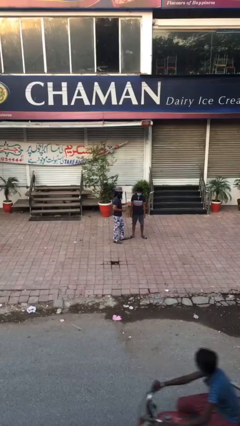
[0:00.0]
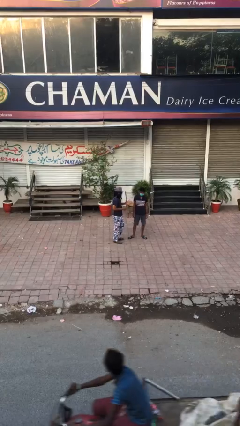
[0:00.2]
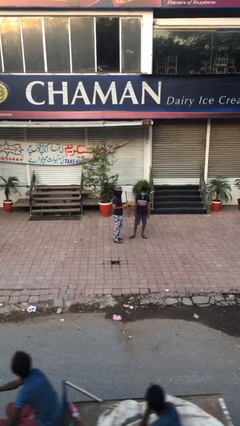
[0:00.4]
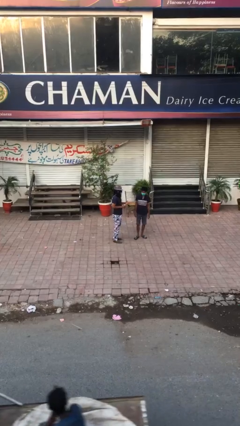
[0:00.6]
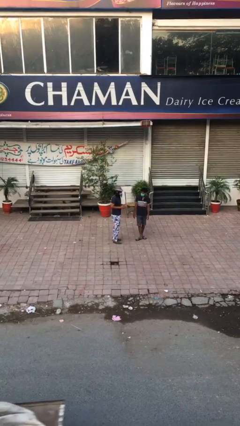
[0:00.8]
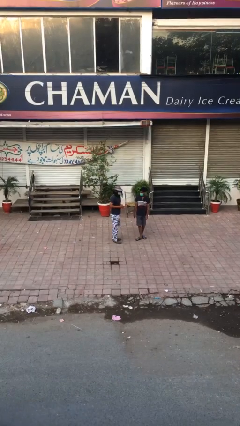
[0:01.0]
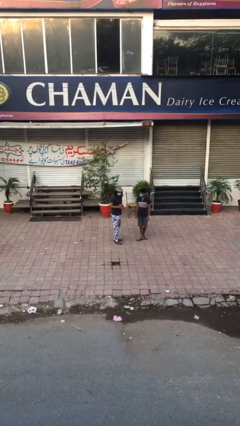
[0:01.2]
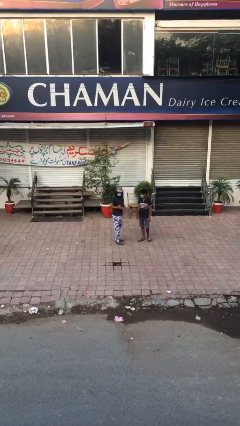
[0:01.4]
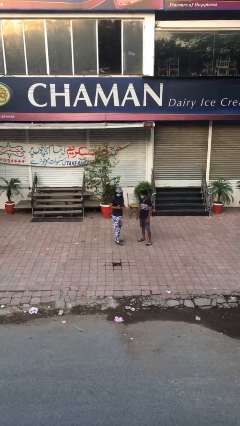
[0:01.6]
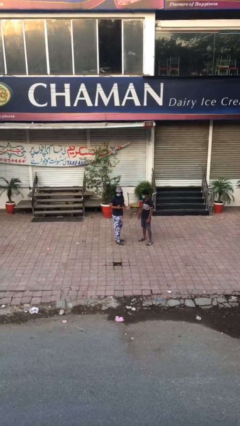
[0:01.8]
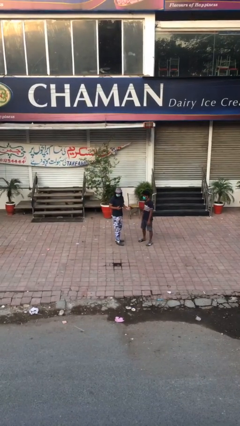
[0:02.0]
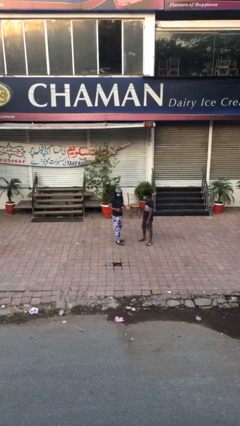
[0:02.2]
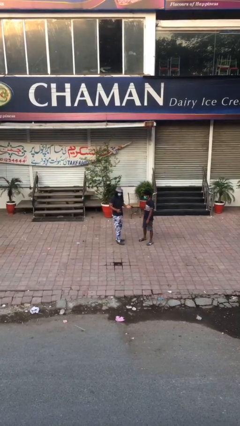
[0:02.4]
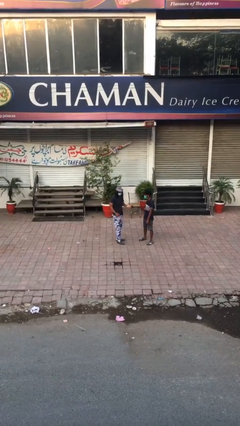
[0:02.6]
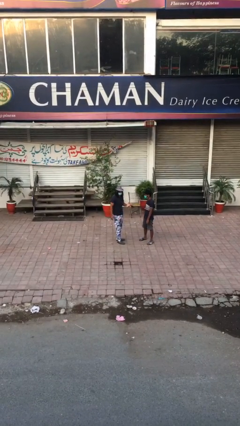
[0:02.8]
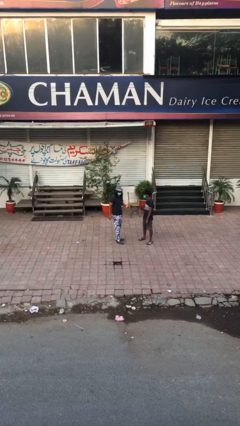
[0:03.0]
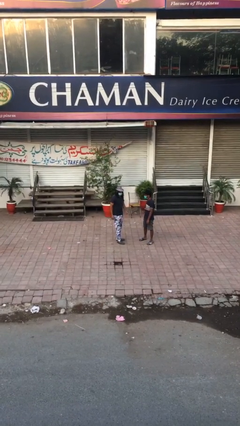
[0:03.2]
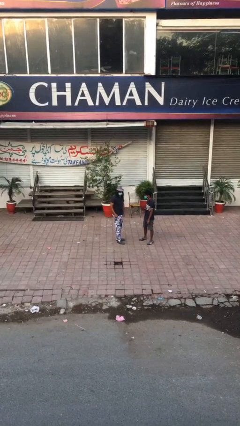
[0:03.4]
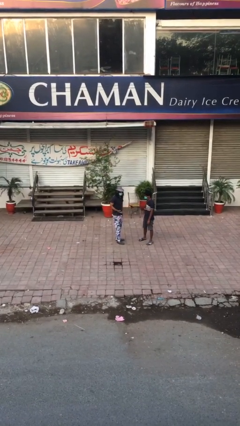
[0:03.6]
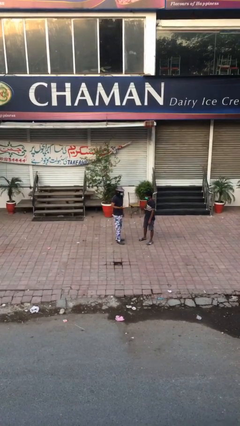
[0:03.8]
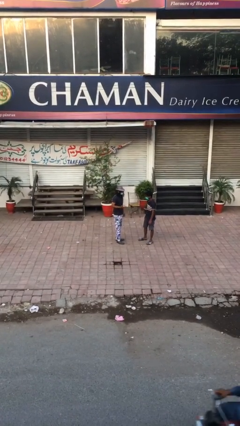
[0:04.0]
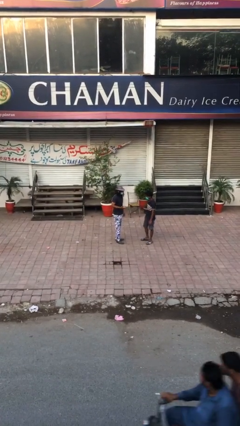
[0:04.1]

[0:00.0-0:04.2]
person talks to person

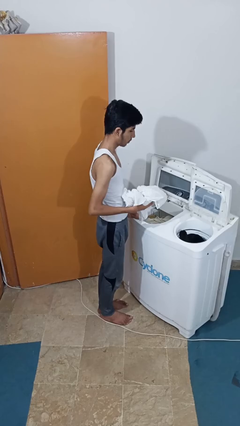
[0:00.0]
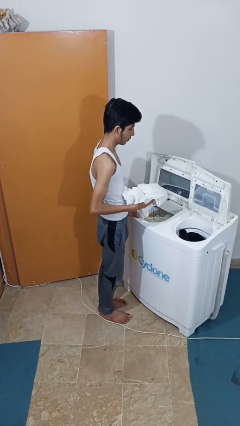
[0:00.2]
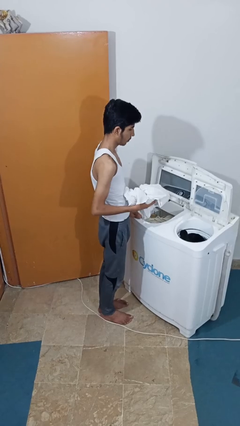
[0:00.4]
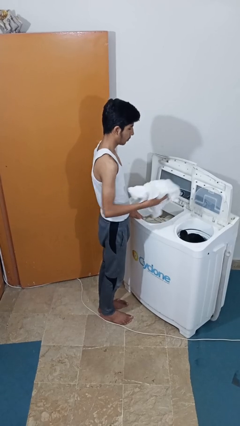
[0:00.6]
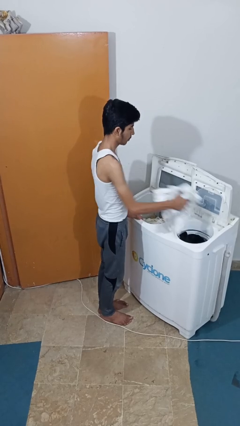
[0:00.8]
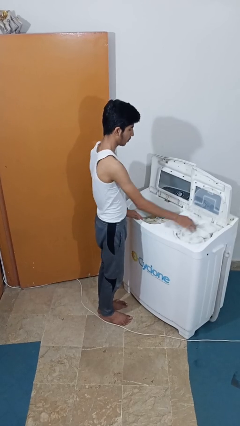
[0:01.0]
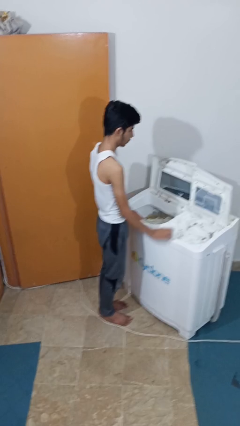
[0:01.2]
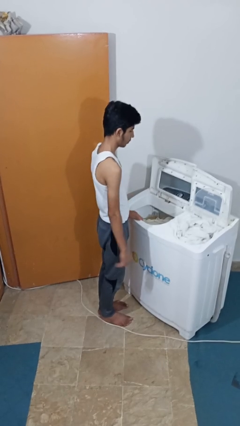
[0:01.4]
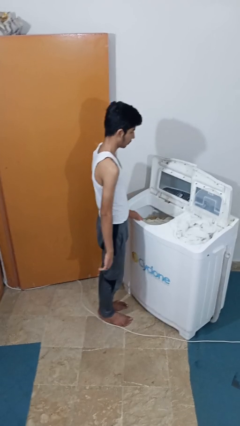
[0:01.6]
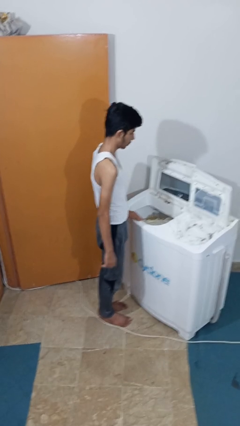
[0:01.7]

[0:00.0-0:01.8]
person loads dryer

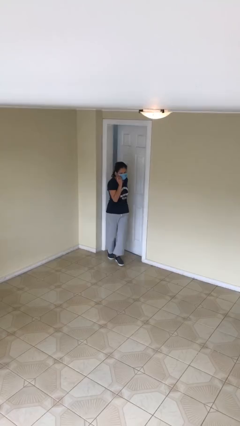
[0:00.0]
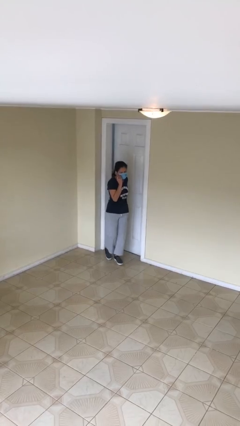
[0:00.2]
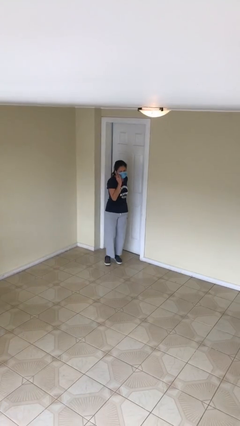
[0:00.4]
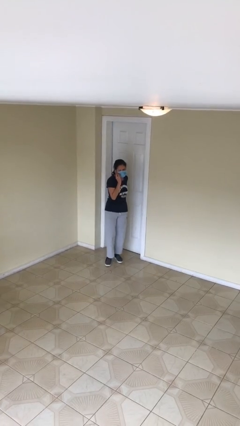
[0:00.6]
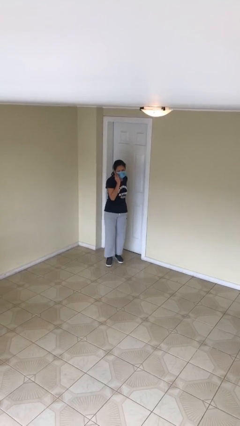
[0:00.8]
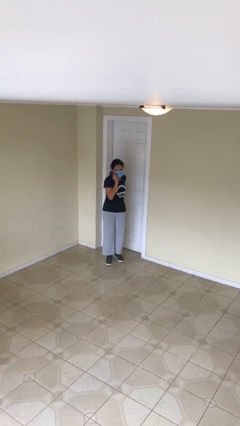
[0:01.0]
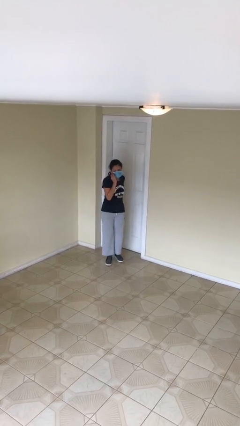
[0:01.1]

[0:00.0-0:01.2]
person closes facility door

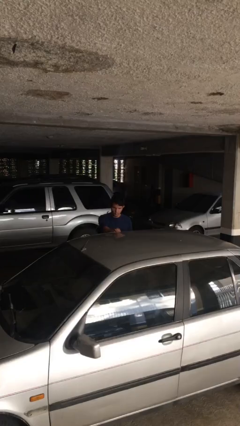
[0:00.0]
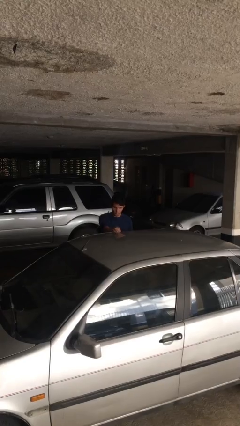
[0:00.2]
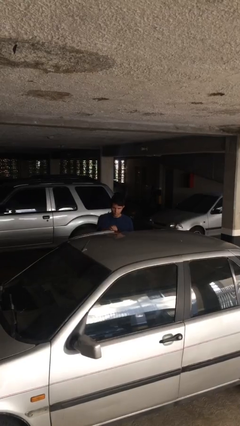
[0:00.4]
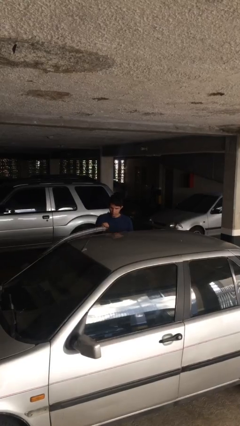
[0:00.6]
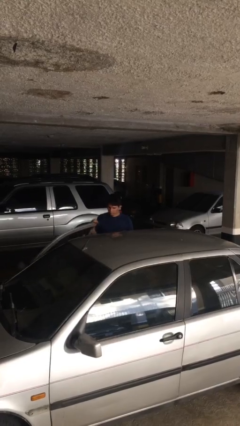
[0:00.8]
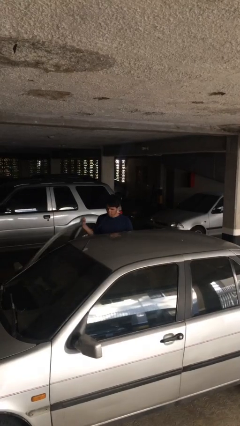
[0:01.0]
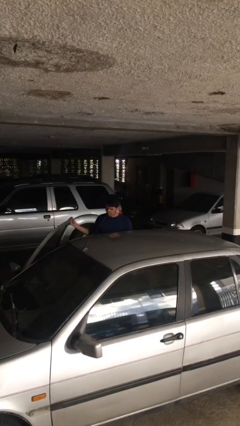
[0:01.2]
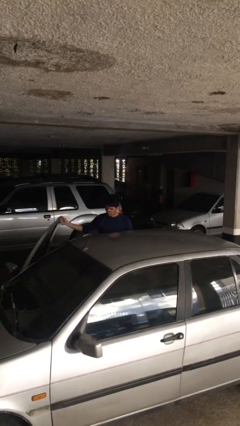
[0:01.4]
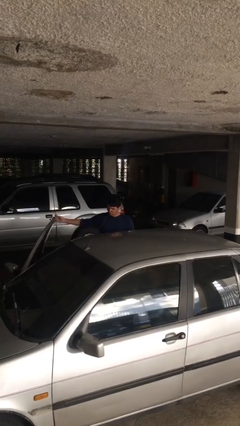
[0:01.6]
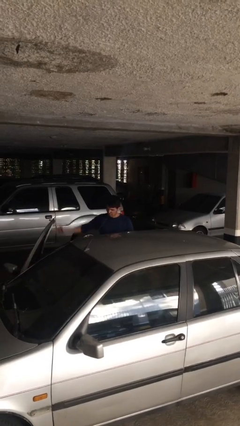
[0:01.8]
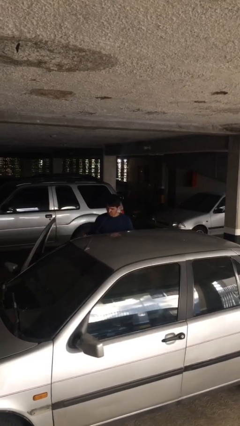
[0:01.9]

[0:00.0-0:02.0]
person opens car door

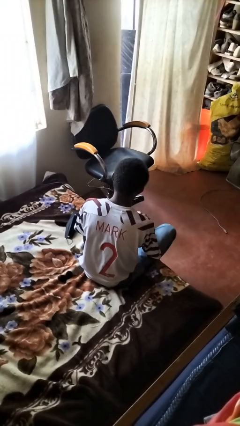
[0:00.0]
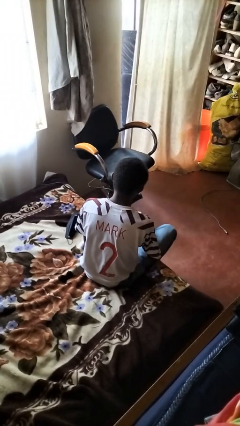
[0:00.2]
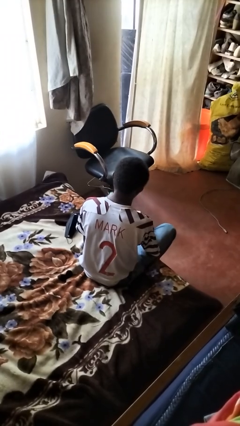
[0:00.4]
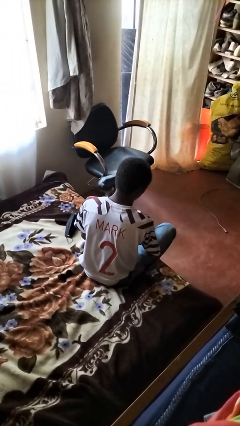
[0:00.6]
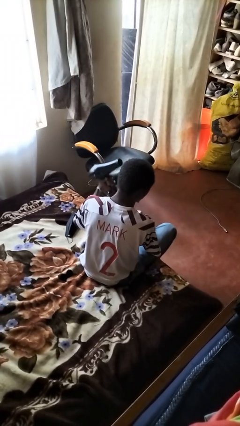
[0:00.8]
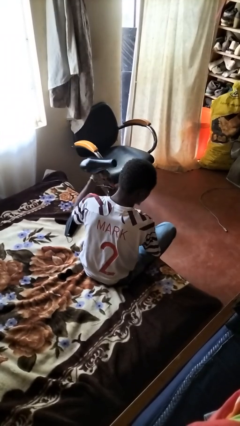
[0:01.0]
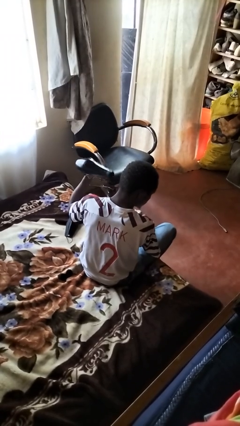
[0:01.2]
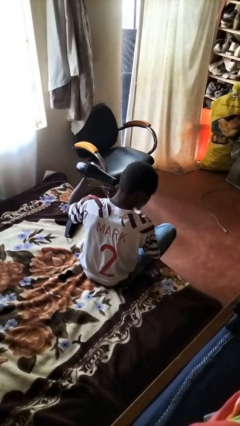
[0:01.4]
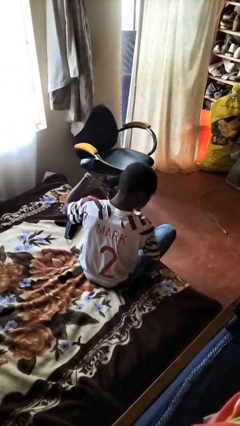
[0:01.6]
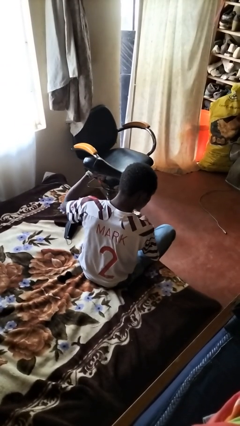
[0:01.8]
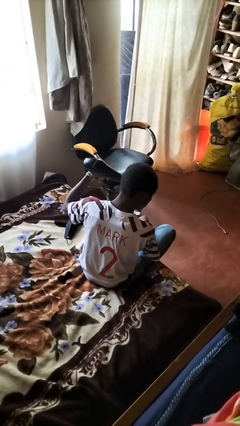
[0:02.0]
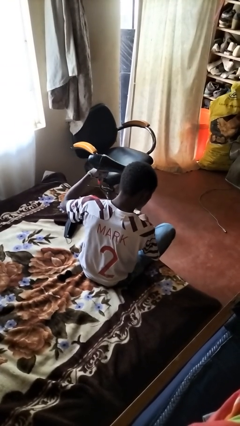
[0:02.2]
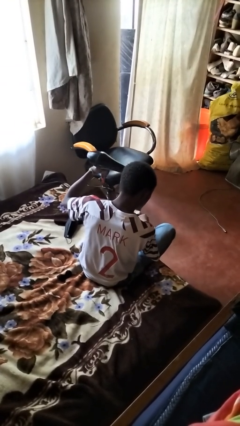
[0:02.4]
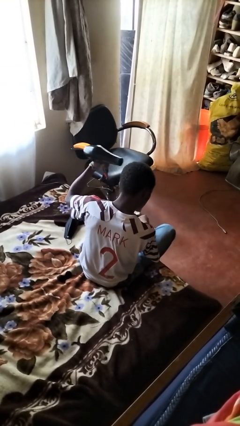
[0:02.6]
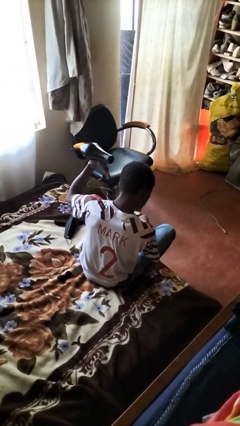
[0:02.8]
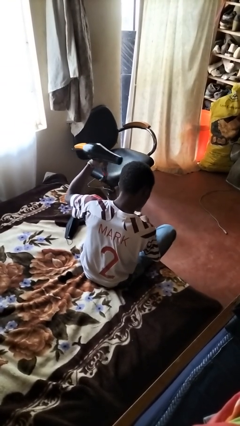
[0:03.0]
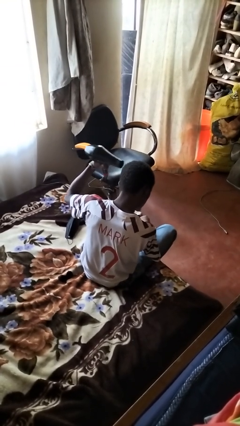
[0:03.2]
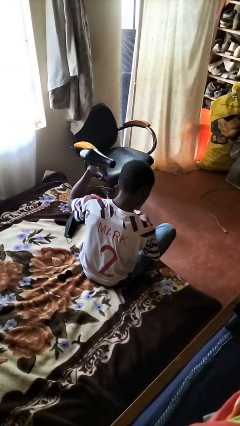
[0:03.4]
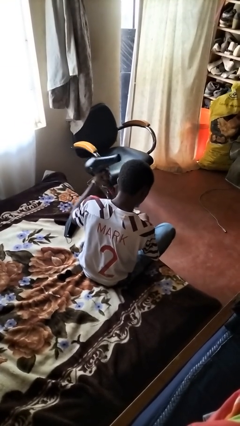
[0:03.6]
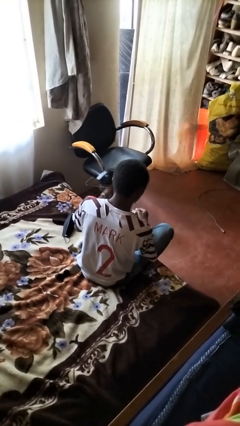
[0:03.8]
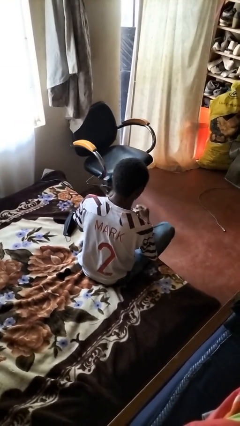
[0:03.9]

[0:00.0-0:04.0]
person dries hair with hairdryer

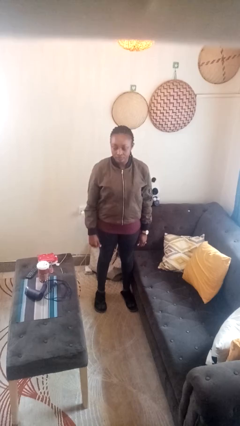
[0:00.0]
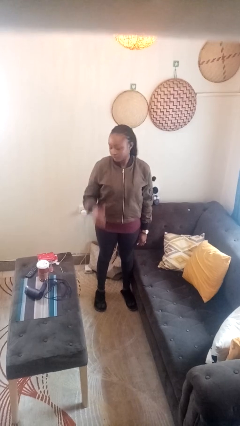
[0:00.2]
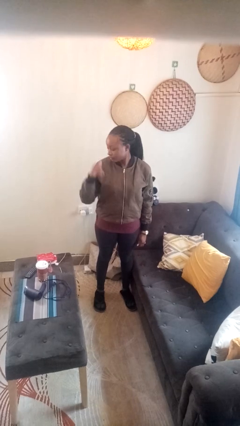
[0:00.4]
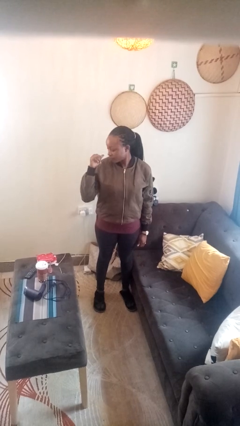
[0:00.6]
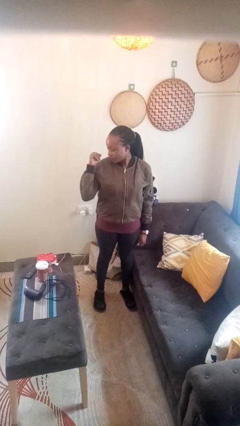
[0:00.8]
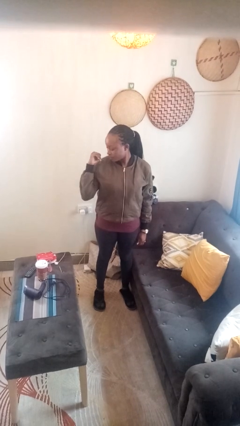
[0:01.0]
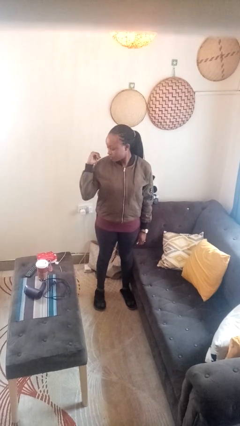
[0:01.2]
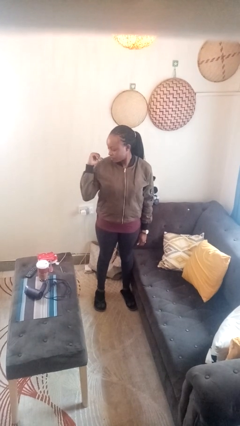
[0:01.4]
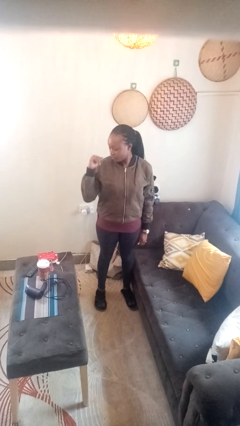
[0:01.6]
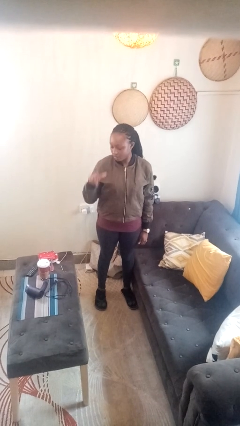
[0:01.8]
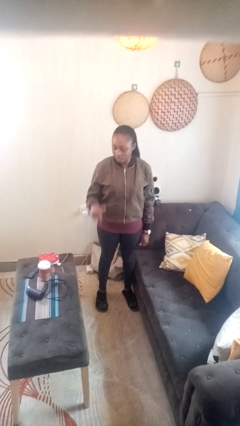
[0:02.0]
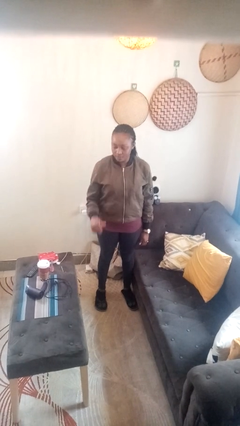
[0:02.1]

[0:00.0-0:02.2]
person gestures behind me

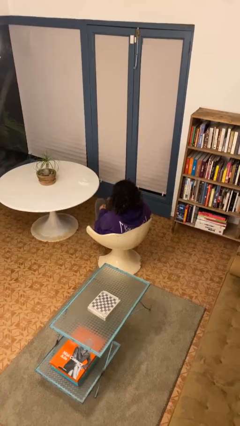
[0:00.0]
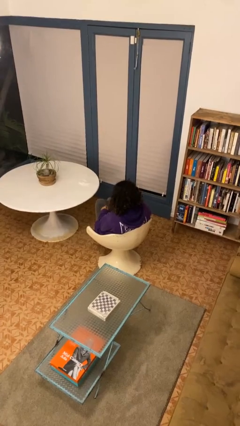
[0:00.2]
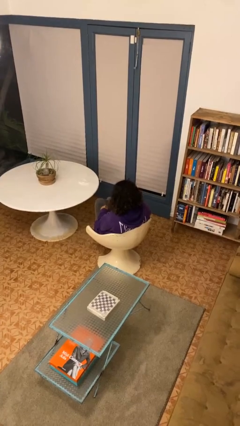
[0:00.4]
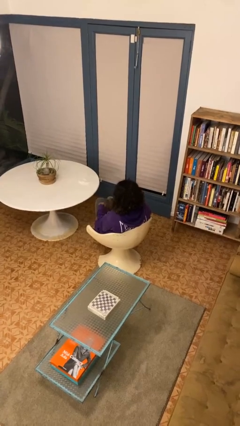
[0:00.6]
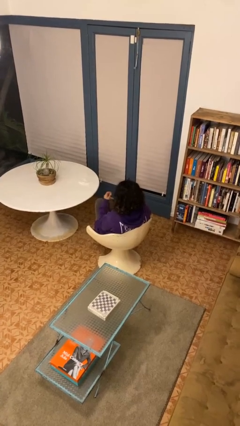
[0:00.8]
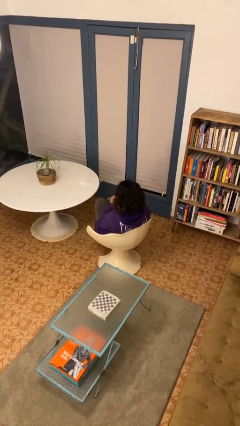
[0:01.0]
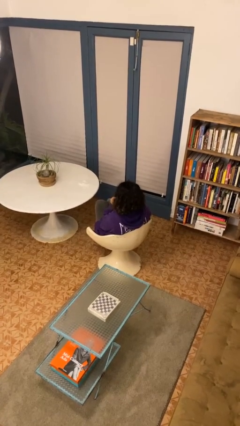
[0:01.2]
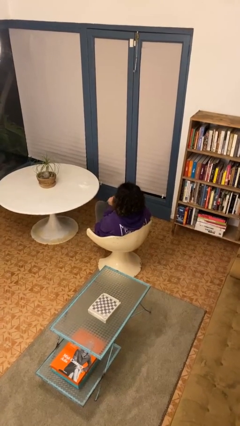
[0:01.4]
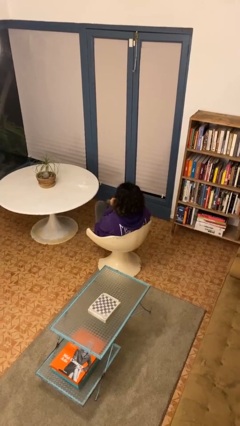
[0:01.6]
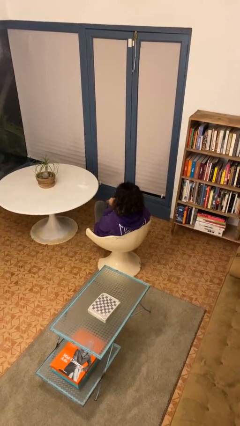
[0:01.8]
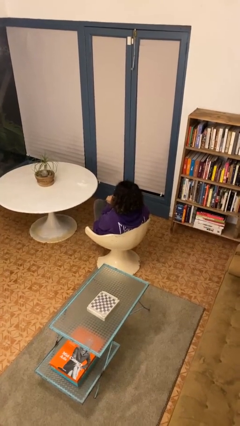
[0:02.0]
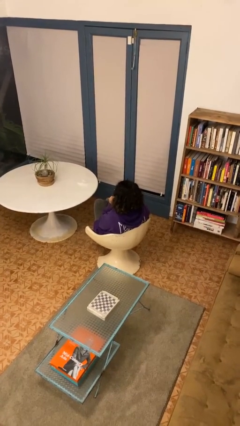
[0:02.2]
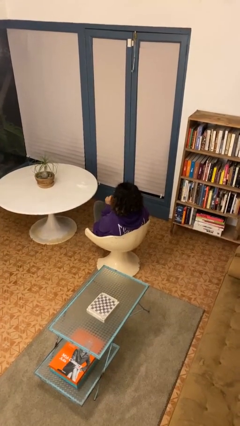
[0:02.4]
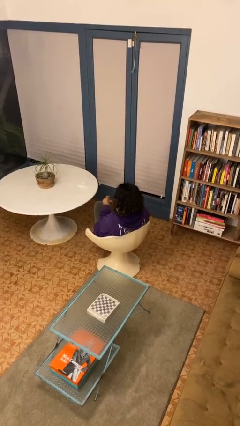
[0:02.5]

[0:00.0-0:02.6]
person strokes chin
